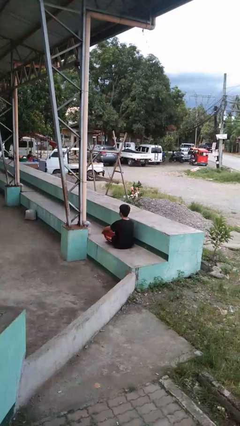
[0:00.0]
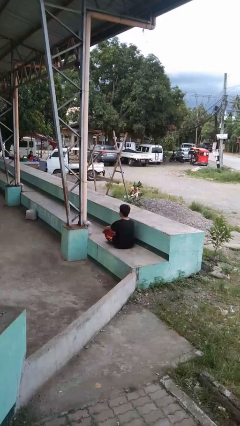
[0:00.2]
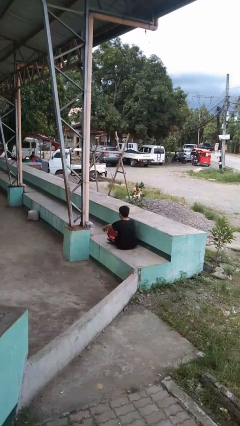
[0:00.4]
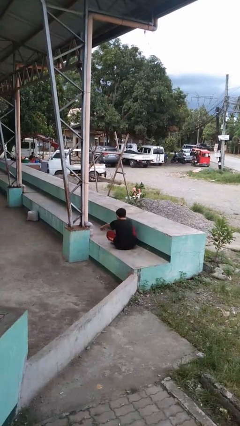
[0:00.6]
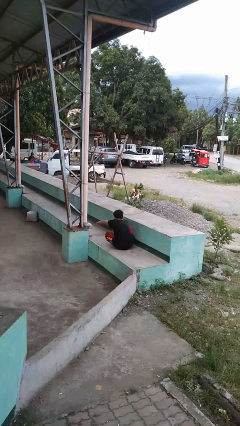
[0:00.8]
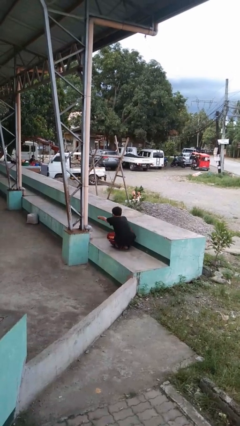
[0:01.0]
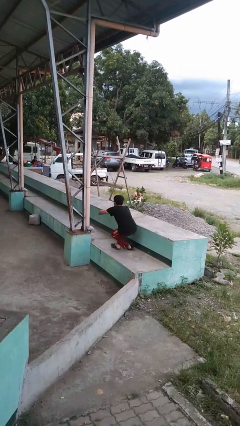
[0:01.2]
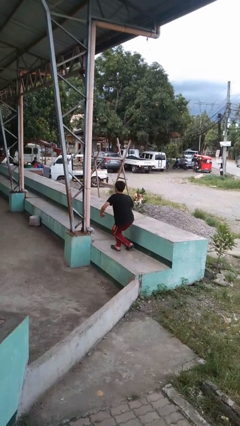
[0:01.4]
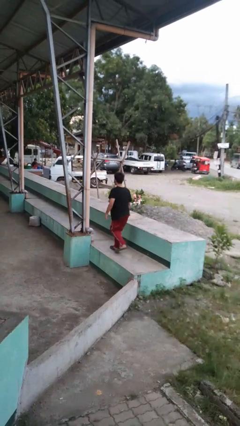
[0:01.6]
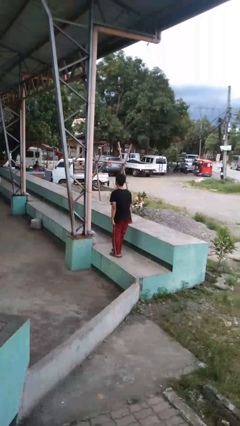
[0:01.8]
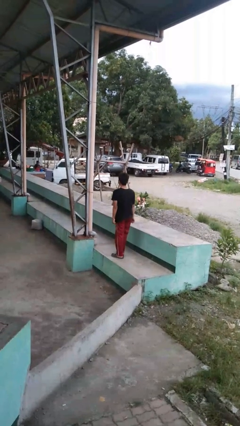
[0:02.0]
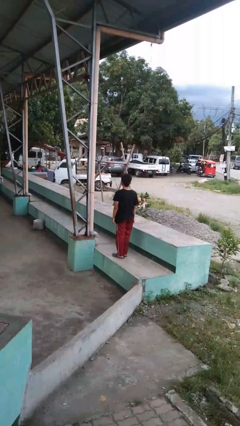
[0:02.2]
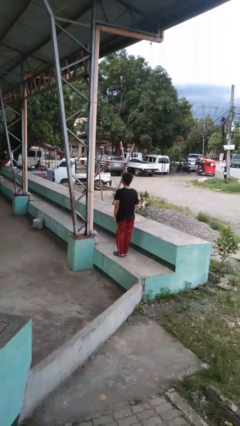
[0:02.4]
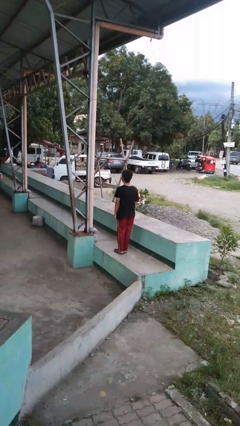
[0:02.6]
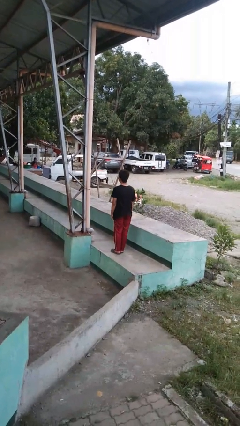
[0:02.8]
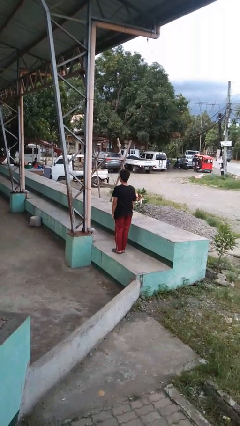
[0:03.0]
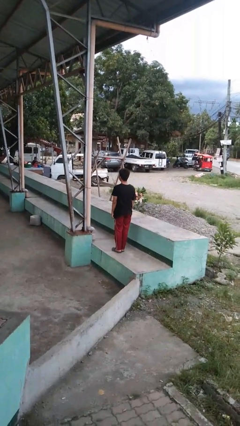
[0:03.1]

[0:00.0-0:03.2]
person stands up from floor

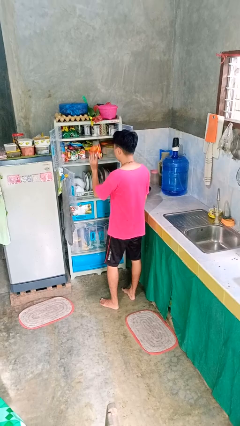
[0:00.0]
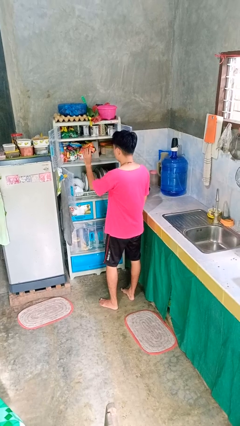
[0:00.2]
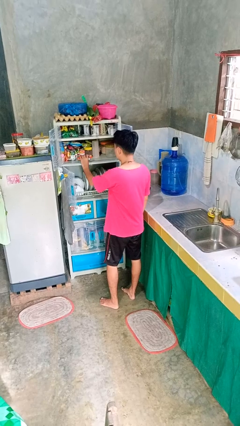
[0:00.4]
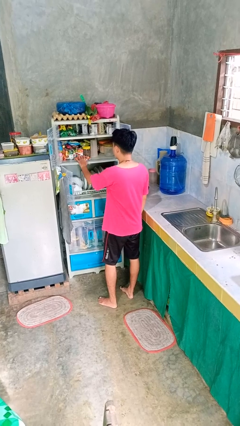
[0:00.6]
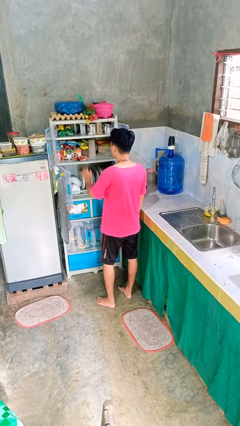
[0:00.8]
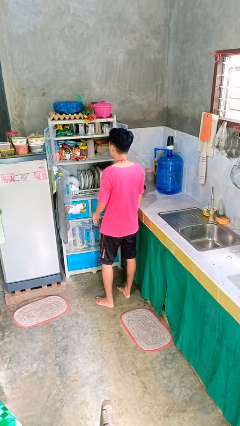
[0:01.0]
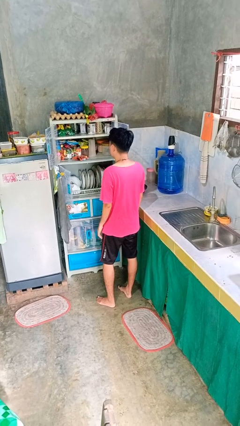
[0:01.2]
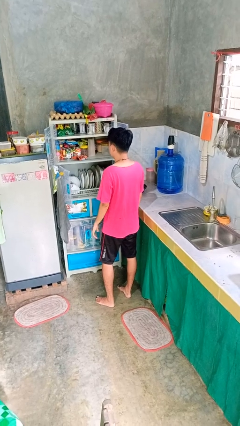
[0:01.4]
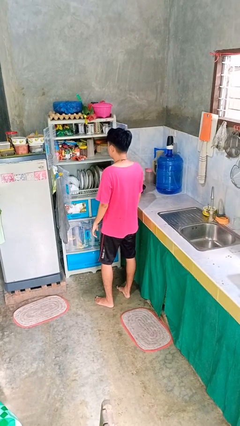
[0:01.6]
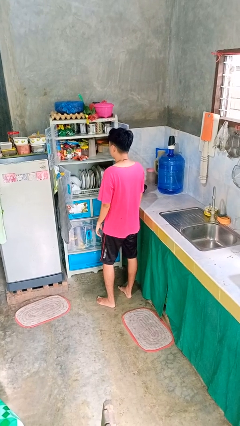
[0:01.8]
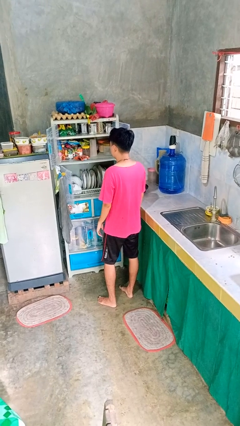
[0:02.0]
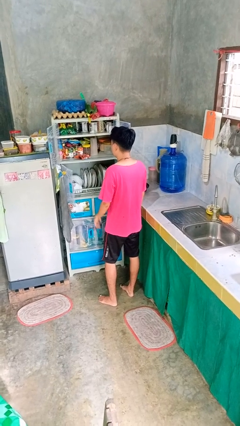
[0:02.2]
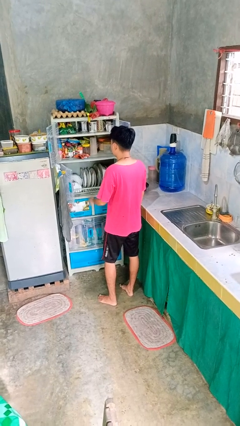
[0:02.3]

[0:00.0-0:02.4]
person puts object in cabinet

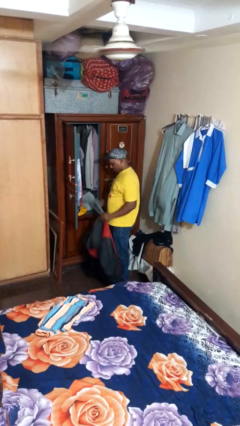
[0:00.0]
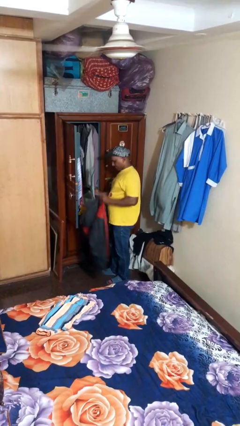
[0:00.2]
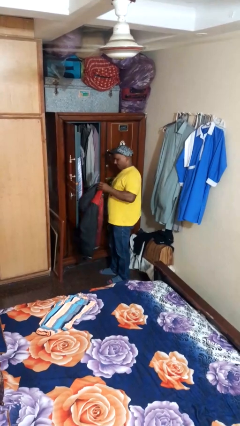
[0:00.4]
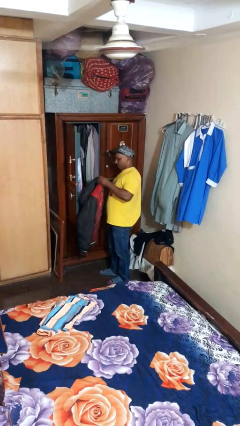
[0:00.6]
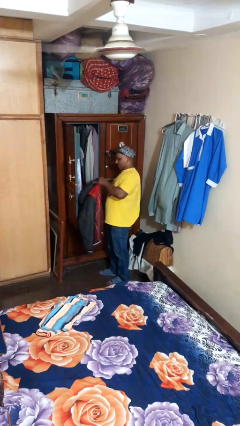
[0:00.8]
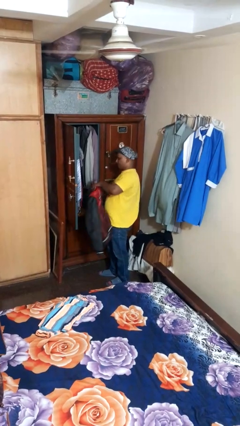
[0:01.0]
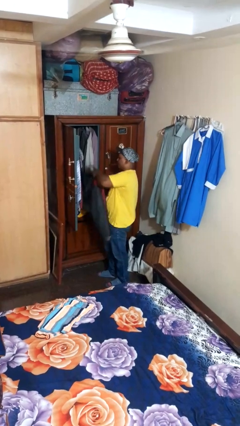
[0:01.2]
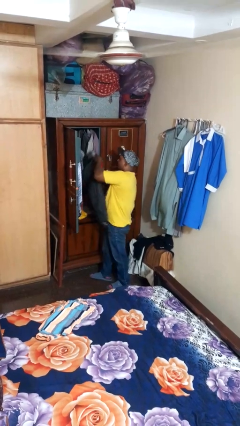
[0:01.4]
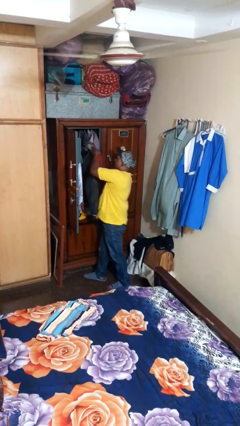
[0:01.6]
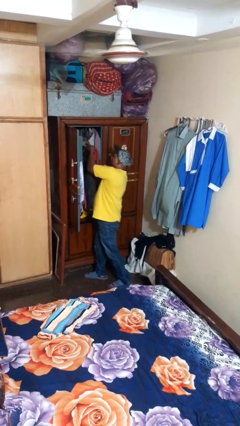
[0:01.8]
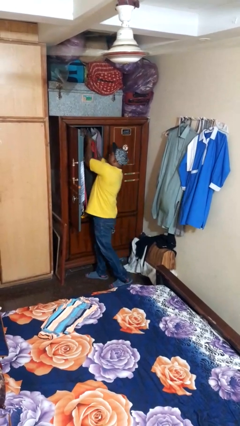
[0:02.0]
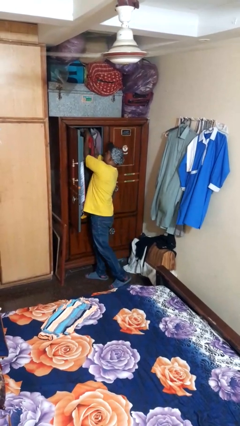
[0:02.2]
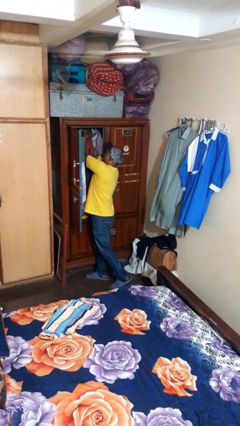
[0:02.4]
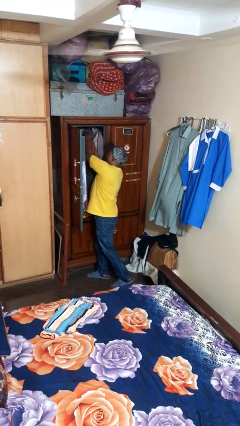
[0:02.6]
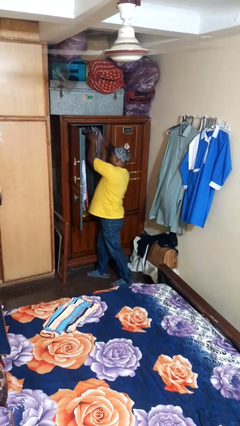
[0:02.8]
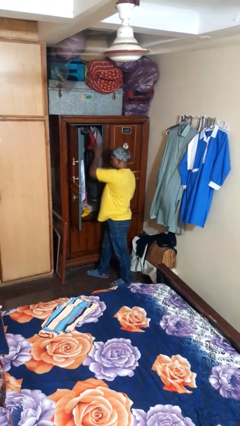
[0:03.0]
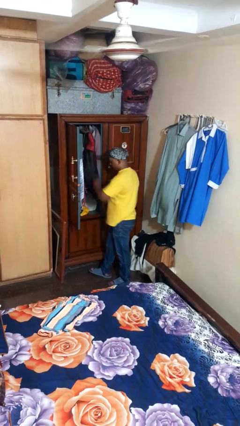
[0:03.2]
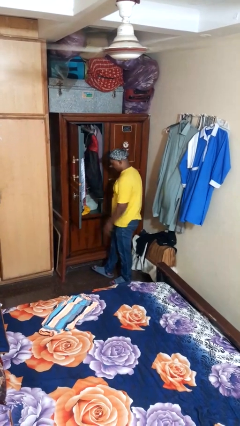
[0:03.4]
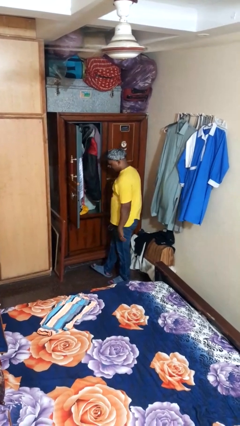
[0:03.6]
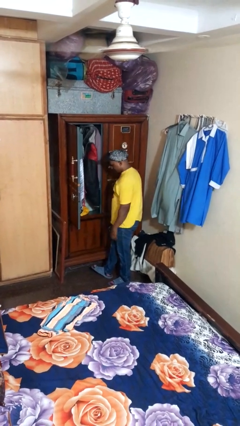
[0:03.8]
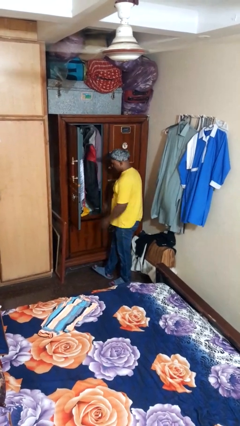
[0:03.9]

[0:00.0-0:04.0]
person puts clothes into closet

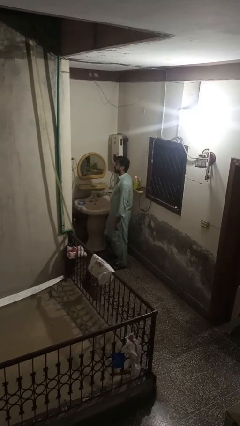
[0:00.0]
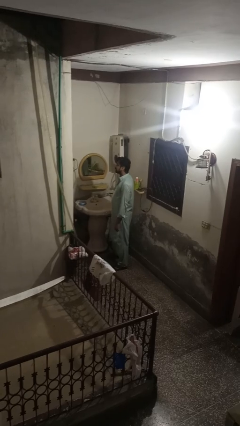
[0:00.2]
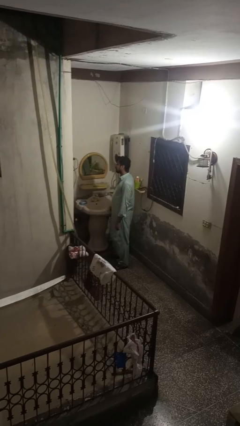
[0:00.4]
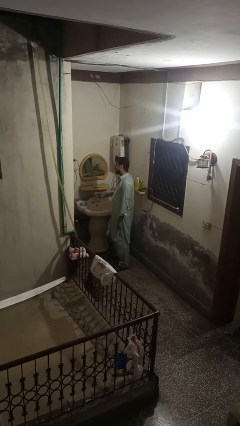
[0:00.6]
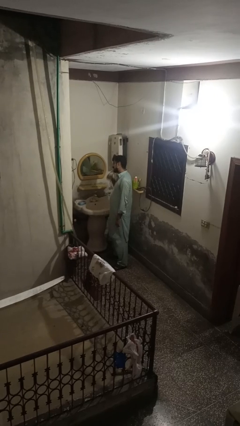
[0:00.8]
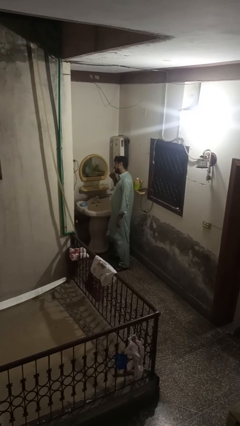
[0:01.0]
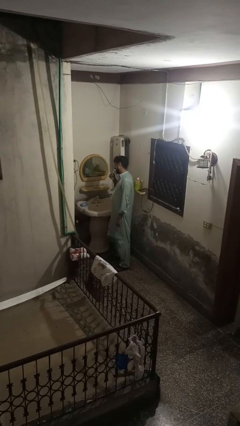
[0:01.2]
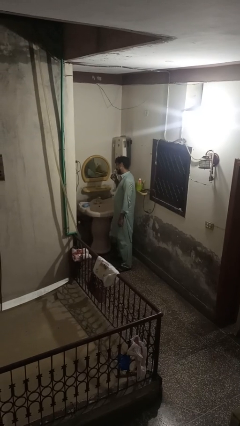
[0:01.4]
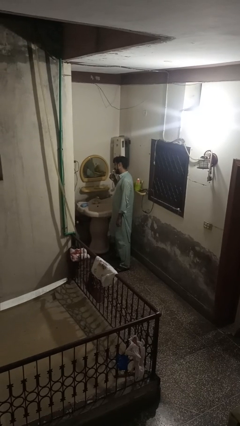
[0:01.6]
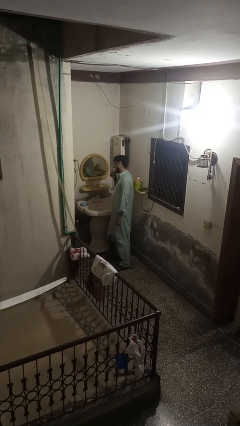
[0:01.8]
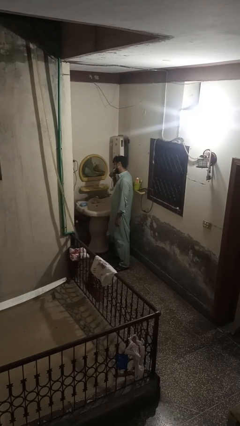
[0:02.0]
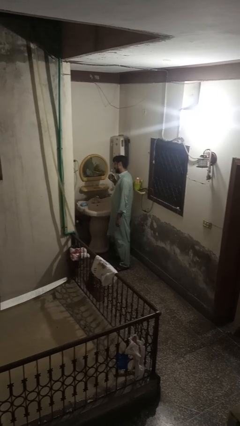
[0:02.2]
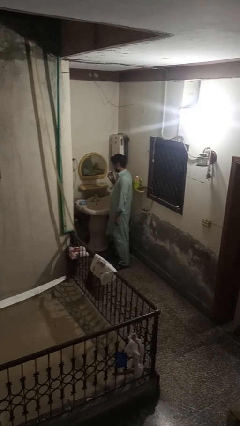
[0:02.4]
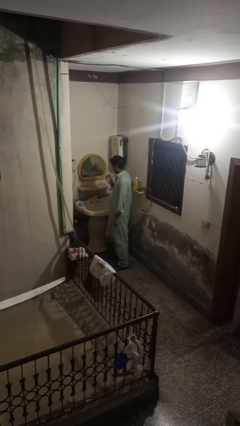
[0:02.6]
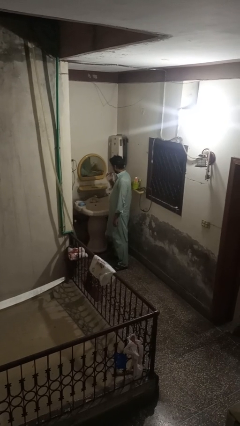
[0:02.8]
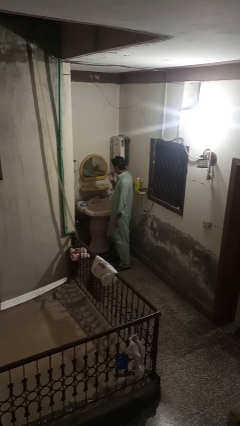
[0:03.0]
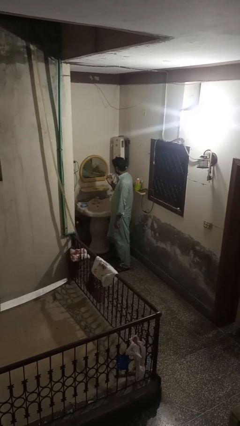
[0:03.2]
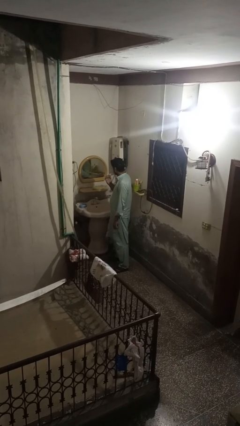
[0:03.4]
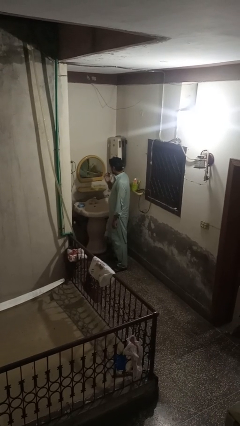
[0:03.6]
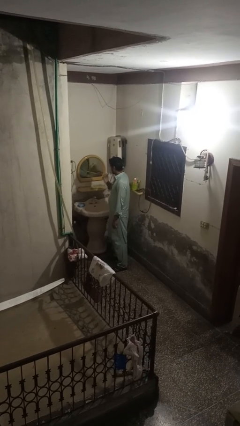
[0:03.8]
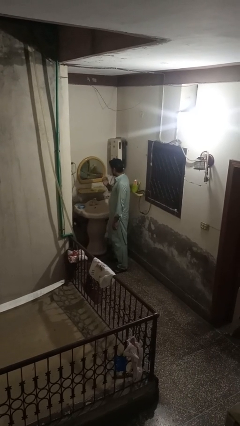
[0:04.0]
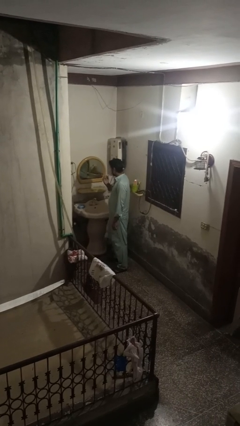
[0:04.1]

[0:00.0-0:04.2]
person brushes teeth

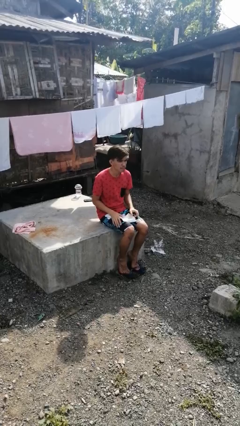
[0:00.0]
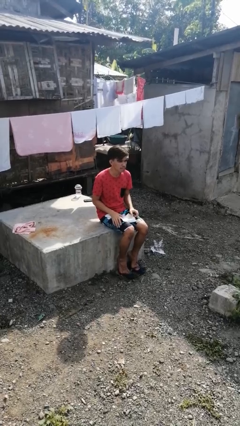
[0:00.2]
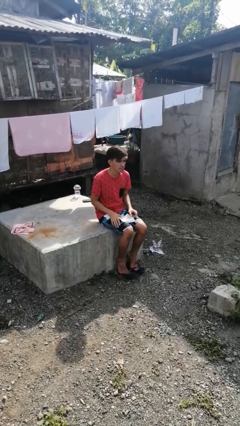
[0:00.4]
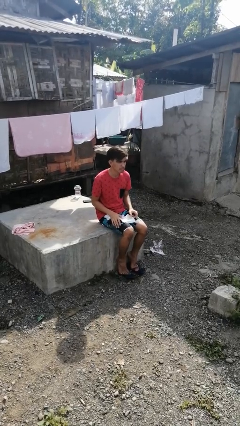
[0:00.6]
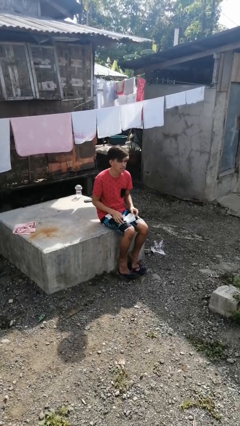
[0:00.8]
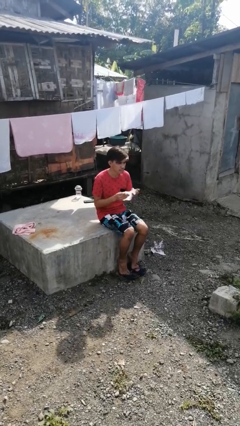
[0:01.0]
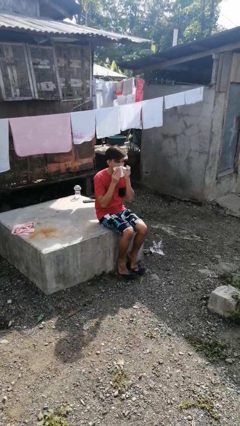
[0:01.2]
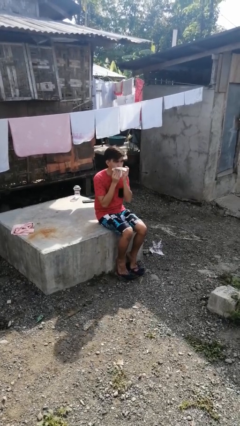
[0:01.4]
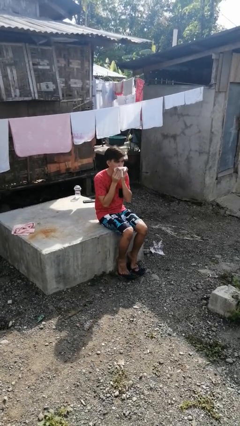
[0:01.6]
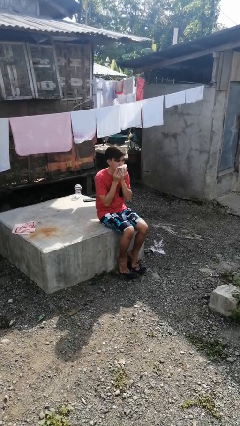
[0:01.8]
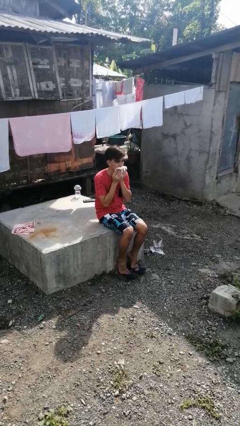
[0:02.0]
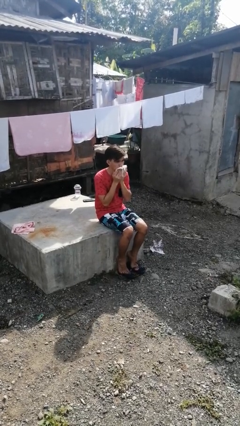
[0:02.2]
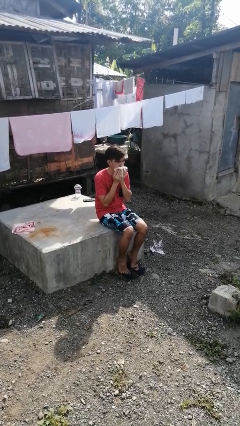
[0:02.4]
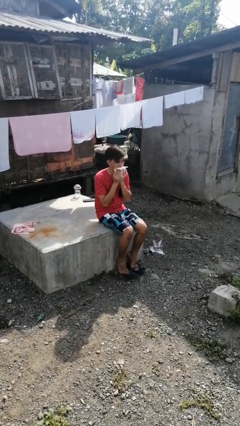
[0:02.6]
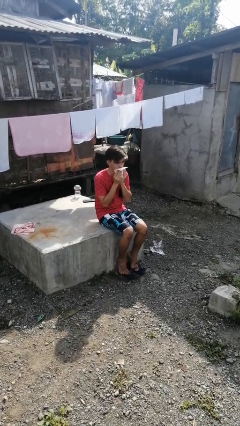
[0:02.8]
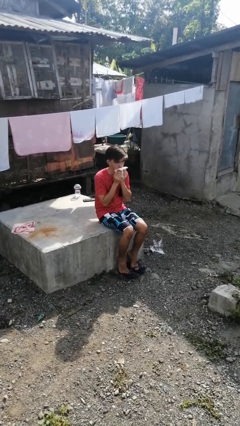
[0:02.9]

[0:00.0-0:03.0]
person wipes mouth with napkin

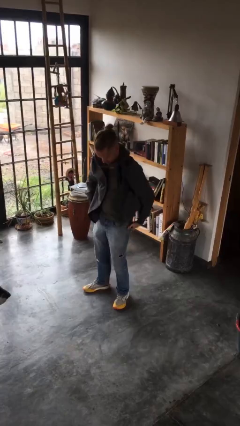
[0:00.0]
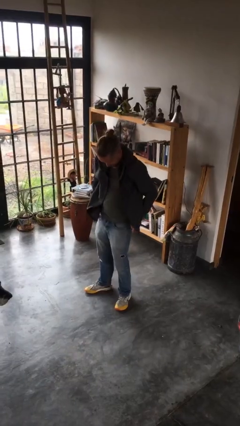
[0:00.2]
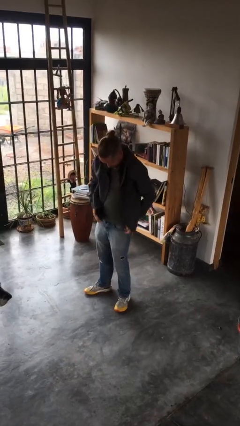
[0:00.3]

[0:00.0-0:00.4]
person zips up jacket

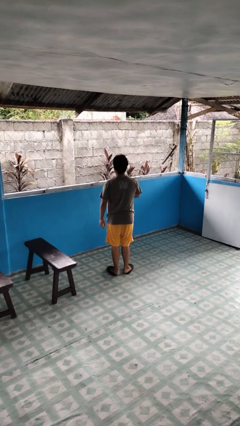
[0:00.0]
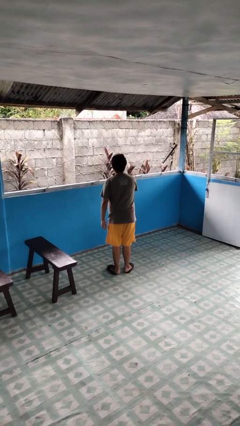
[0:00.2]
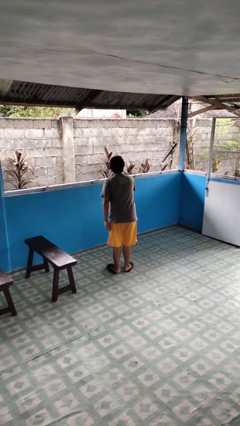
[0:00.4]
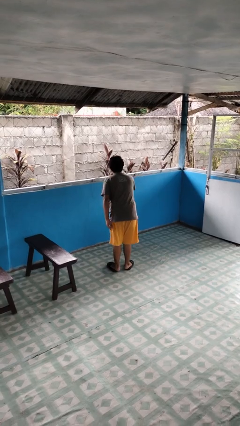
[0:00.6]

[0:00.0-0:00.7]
person gestures be quiet
